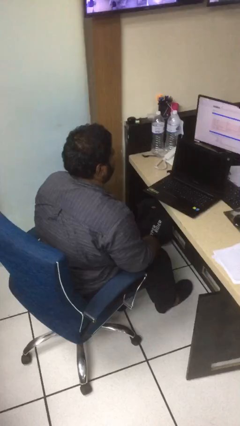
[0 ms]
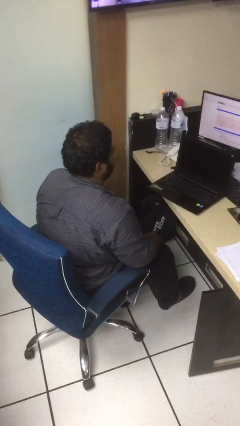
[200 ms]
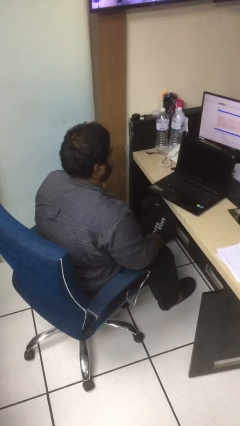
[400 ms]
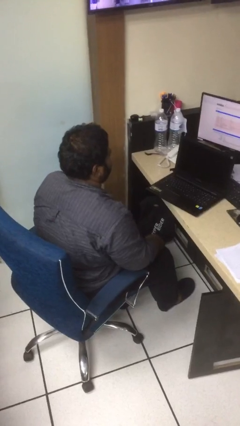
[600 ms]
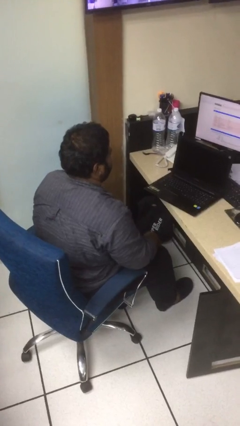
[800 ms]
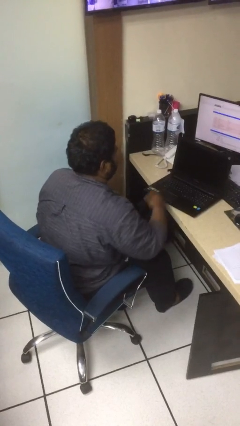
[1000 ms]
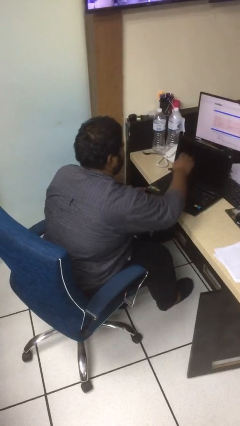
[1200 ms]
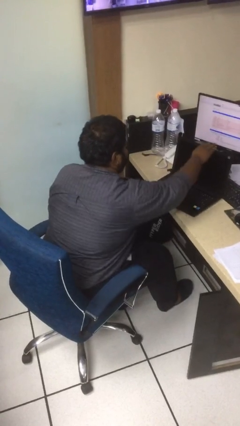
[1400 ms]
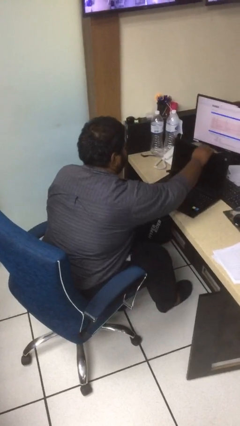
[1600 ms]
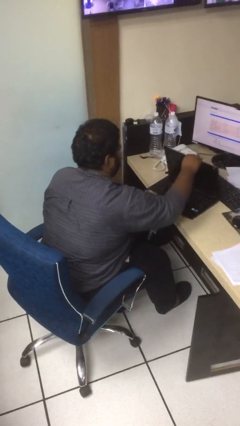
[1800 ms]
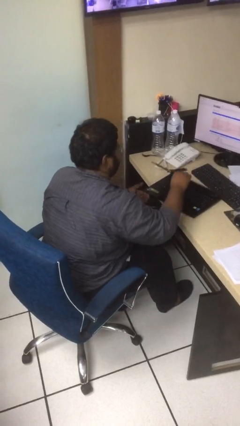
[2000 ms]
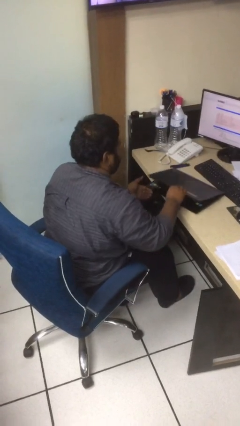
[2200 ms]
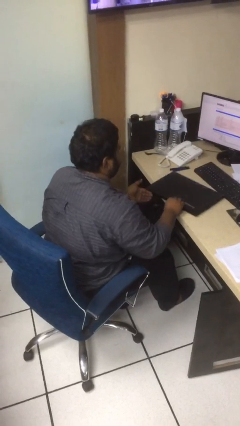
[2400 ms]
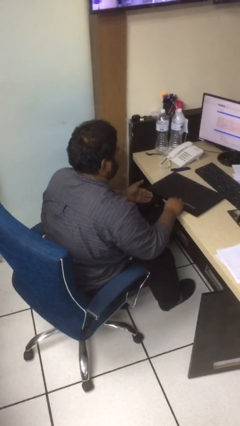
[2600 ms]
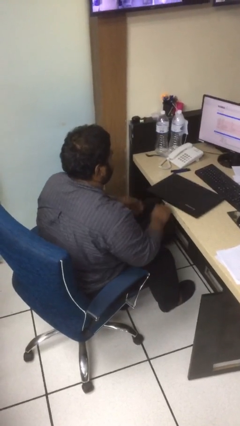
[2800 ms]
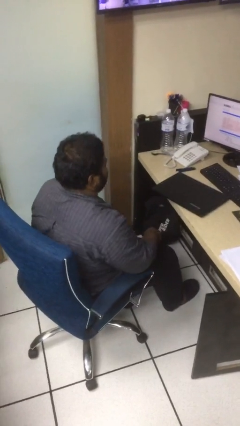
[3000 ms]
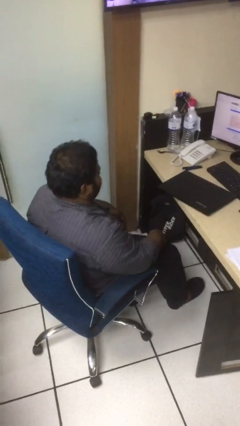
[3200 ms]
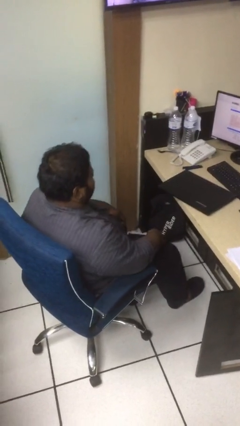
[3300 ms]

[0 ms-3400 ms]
person closes laptop

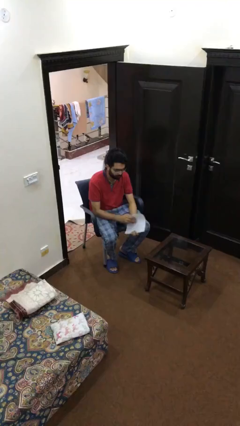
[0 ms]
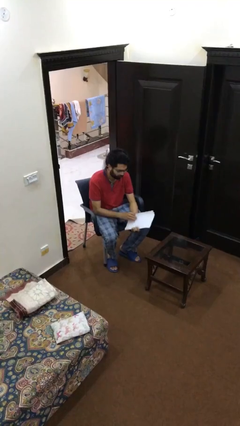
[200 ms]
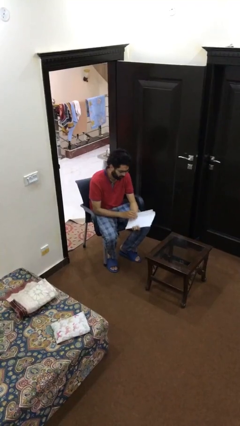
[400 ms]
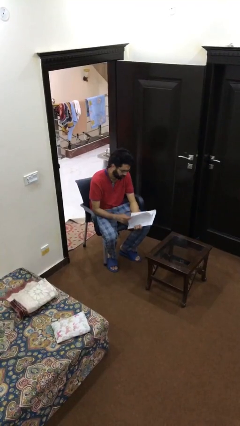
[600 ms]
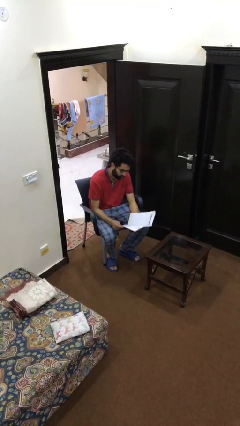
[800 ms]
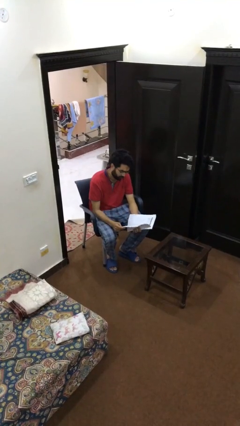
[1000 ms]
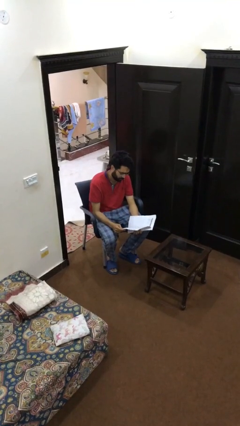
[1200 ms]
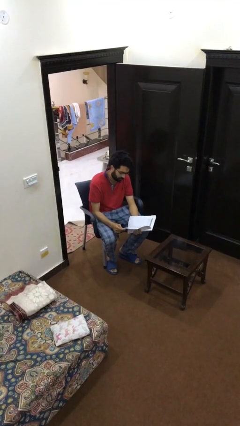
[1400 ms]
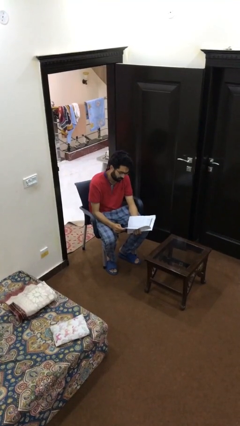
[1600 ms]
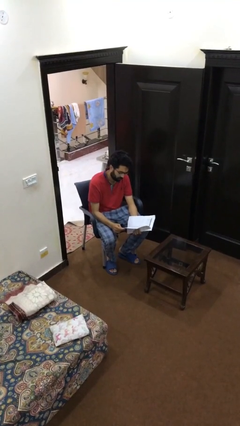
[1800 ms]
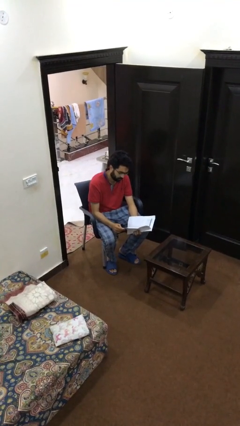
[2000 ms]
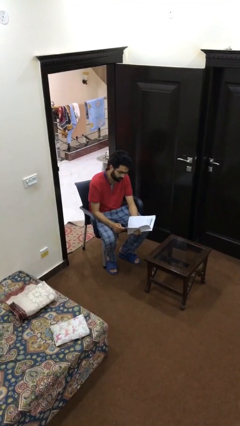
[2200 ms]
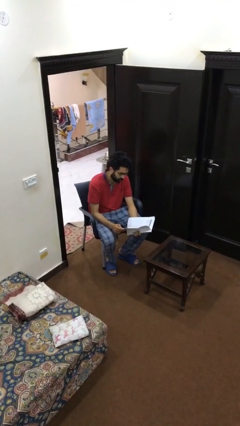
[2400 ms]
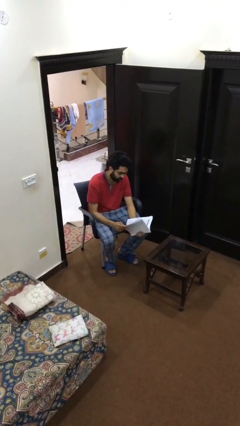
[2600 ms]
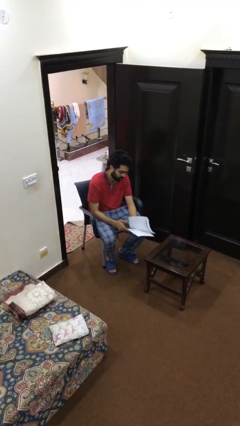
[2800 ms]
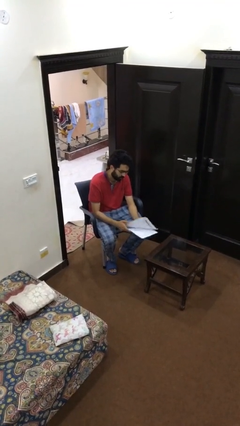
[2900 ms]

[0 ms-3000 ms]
person reads document

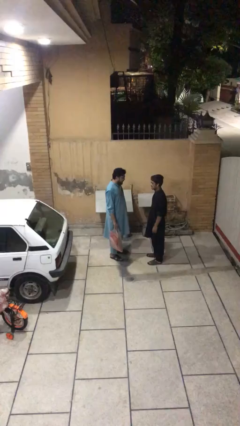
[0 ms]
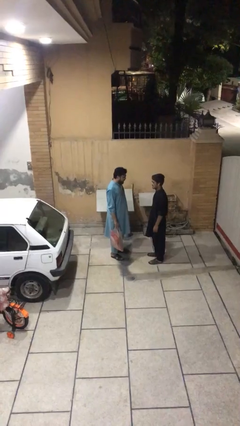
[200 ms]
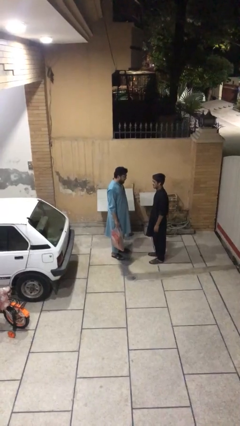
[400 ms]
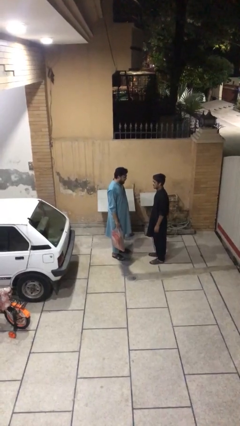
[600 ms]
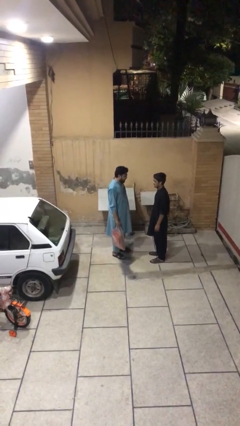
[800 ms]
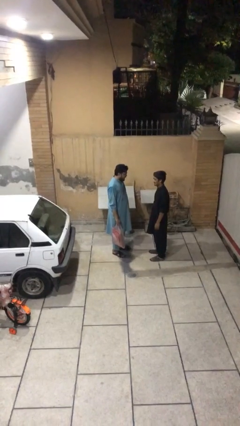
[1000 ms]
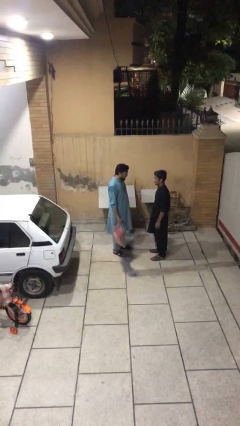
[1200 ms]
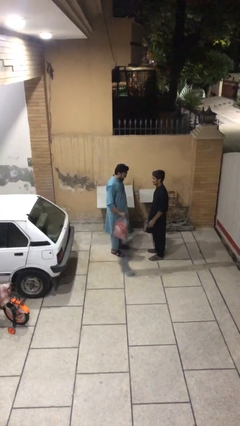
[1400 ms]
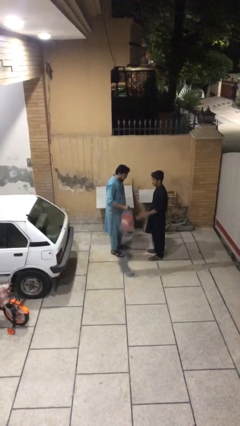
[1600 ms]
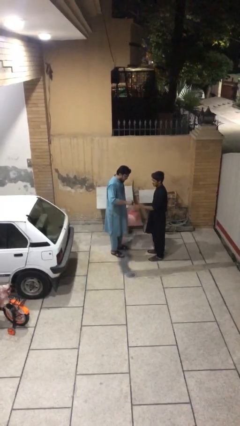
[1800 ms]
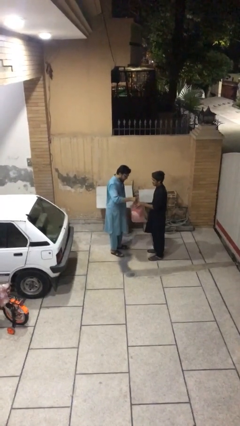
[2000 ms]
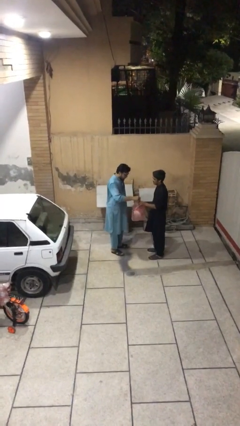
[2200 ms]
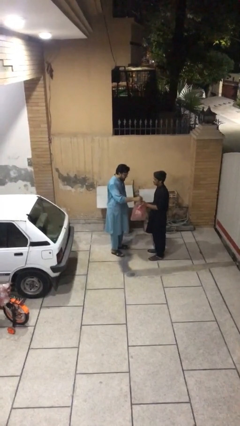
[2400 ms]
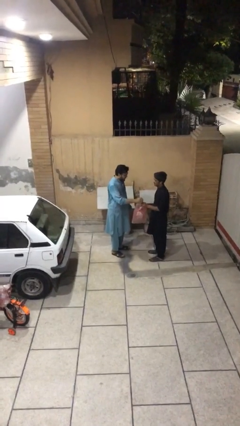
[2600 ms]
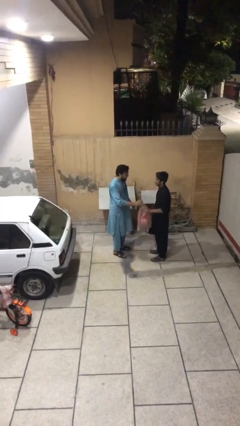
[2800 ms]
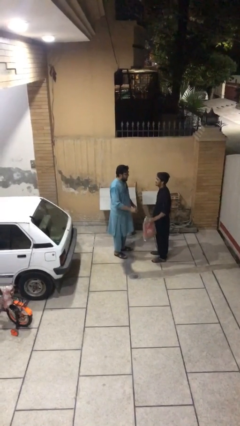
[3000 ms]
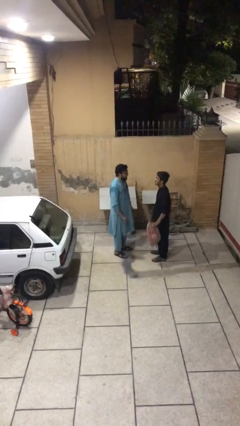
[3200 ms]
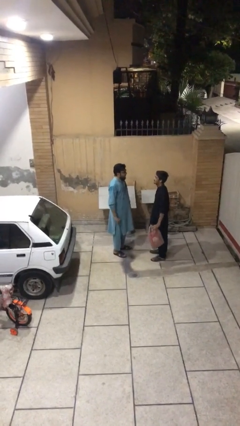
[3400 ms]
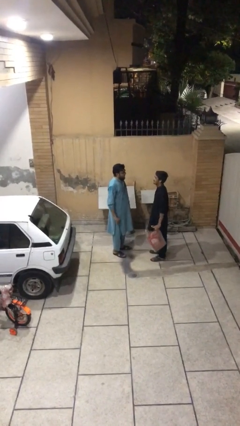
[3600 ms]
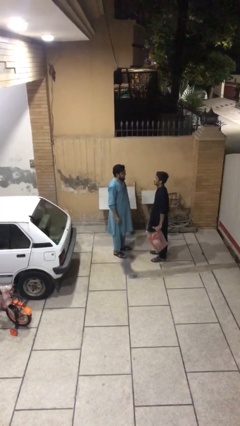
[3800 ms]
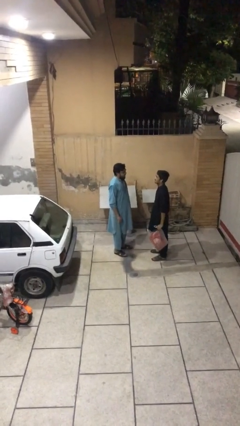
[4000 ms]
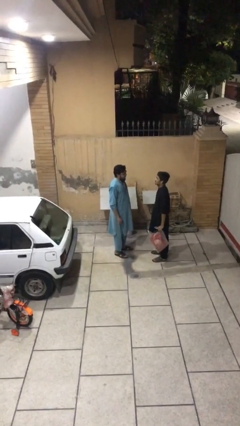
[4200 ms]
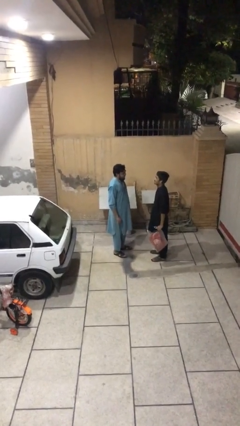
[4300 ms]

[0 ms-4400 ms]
person transfers object to person

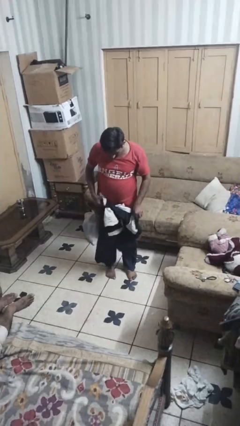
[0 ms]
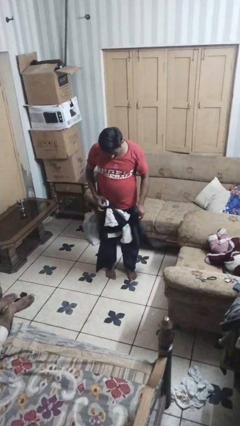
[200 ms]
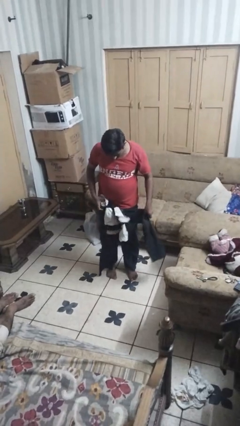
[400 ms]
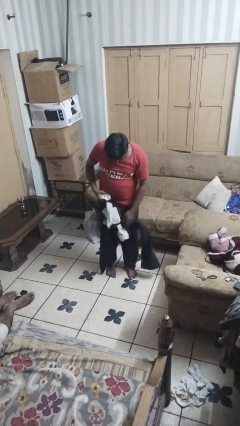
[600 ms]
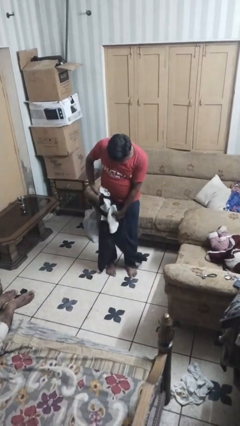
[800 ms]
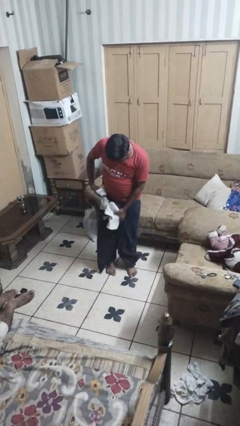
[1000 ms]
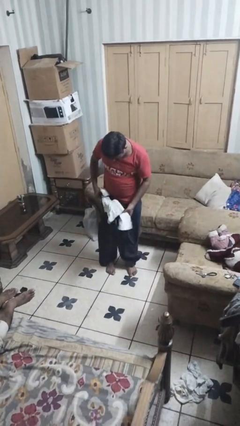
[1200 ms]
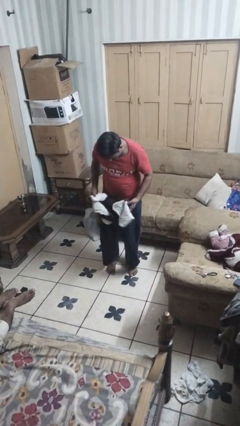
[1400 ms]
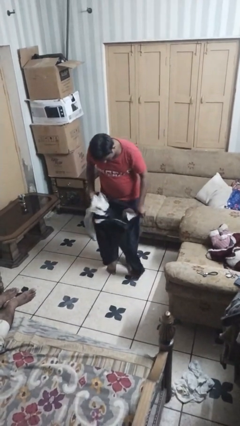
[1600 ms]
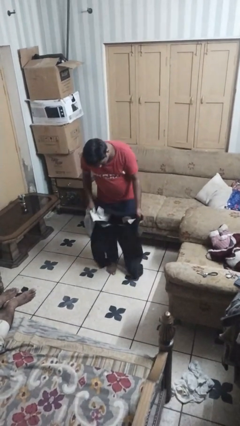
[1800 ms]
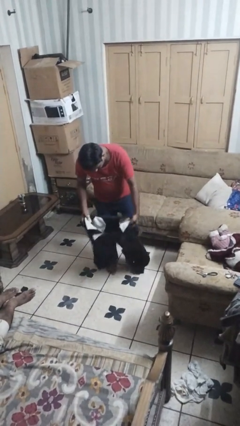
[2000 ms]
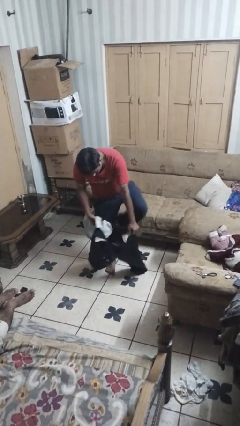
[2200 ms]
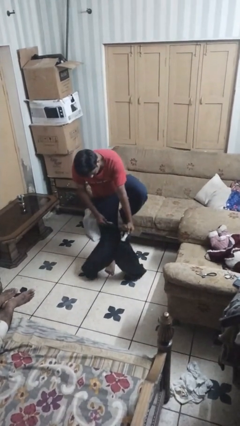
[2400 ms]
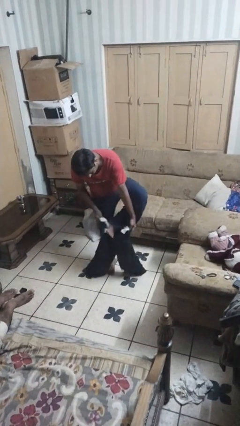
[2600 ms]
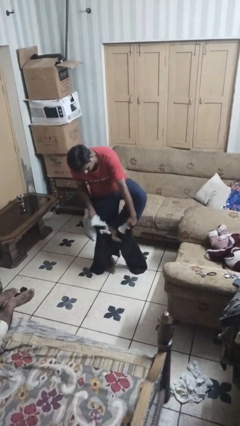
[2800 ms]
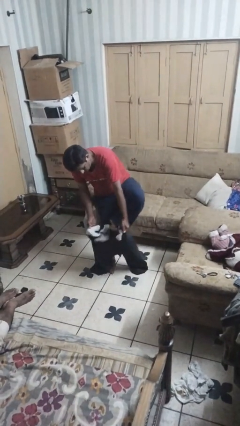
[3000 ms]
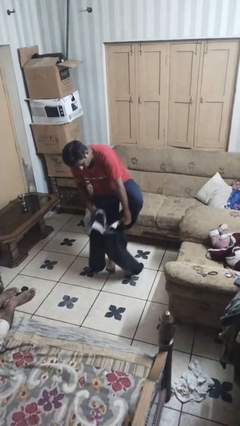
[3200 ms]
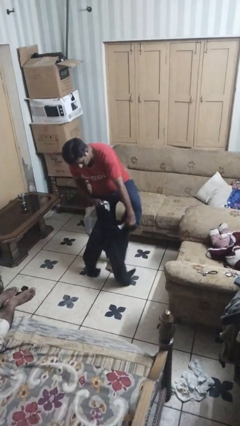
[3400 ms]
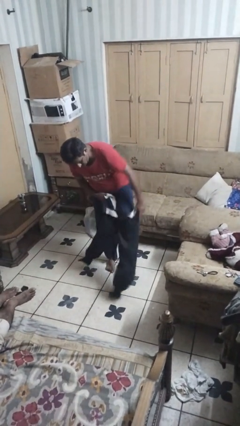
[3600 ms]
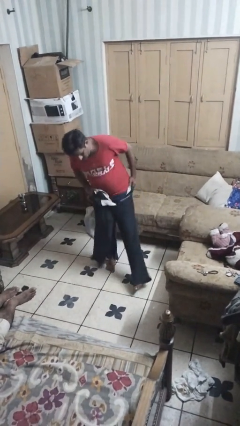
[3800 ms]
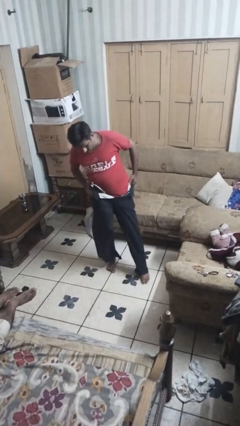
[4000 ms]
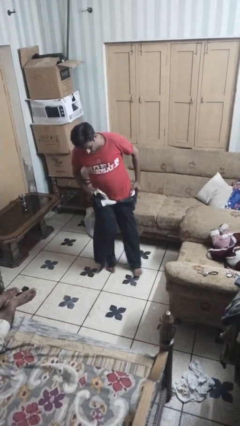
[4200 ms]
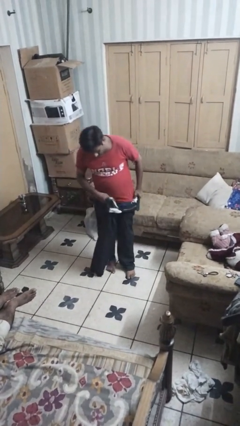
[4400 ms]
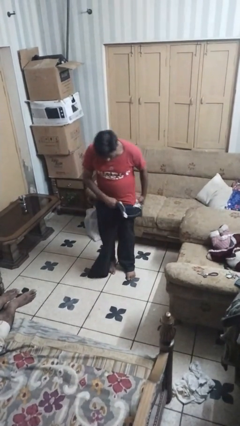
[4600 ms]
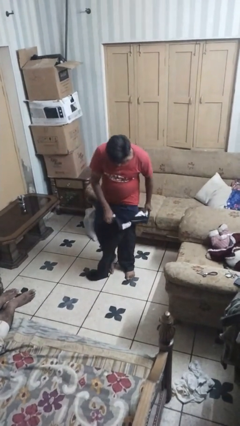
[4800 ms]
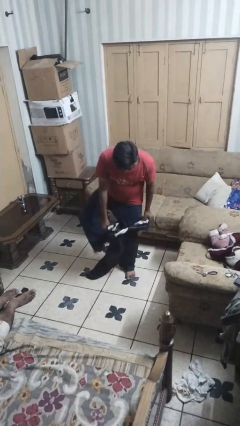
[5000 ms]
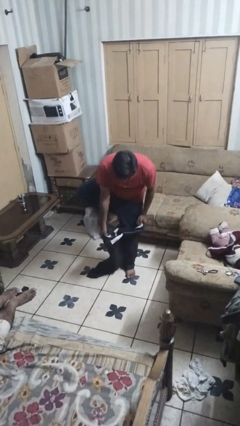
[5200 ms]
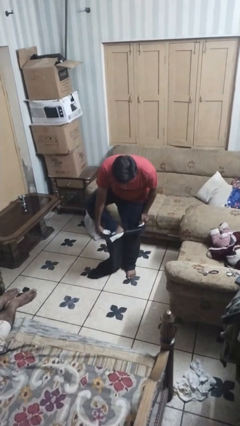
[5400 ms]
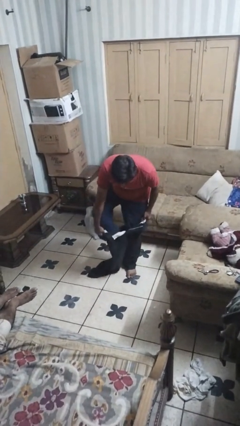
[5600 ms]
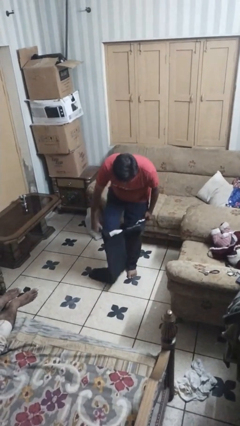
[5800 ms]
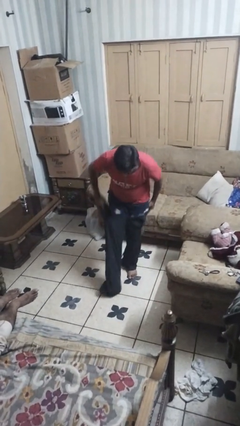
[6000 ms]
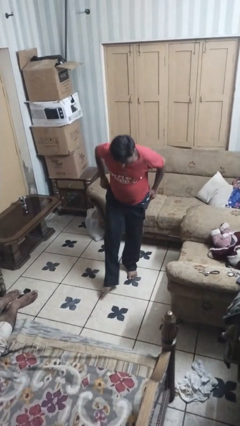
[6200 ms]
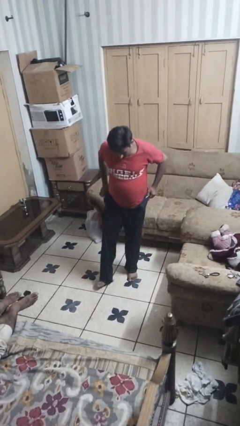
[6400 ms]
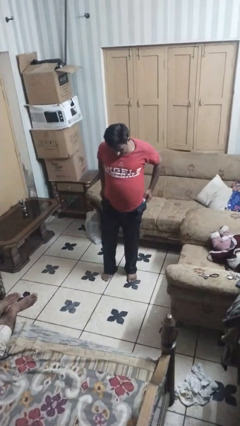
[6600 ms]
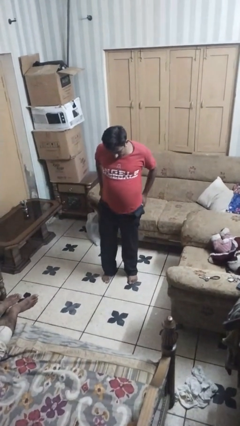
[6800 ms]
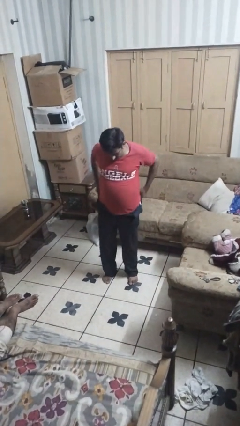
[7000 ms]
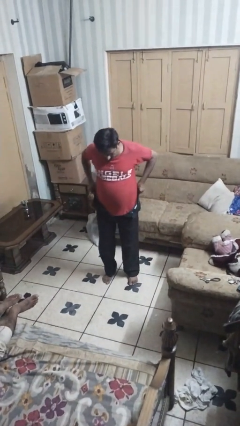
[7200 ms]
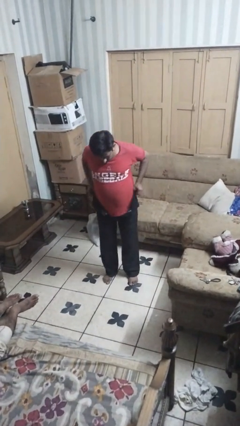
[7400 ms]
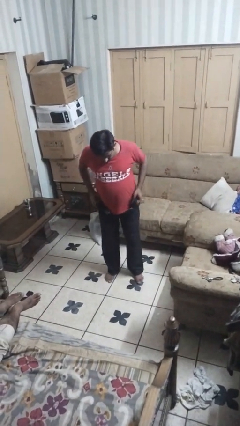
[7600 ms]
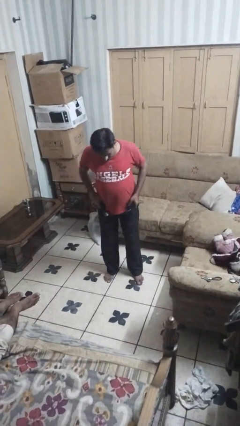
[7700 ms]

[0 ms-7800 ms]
person puts on pants
